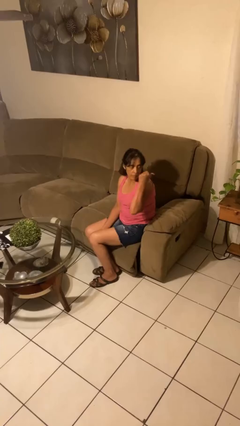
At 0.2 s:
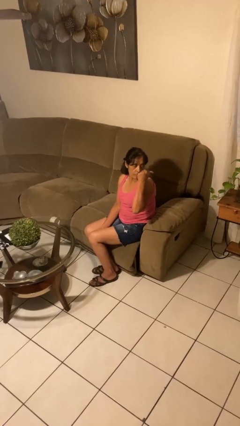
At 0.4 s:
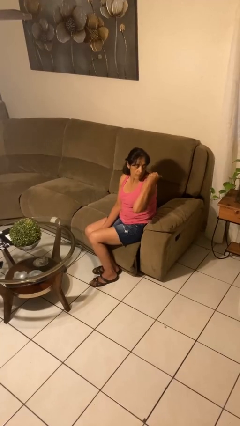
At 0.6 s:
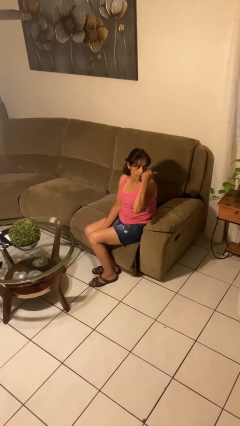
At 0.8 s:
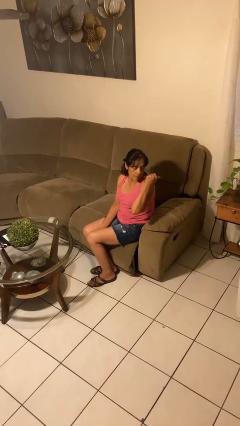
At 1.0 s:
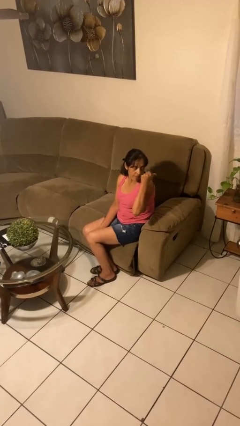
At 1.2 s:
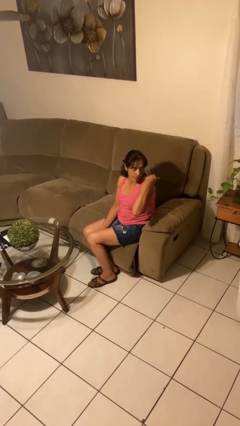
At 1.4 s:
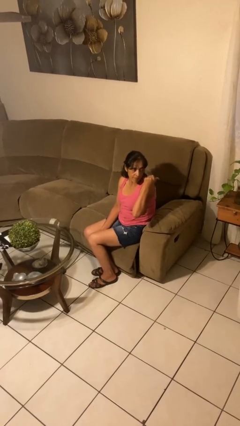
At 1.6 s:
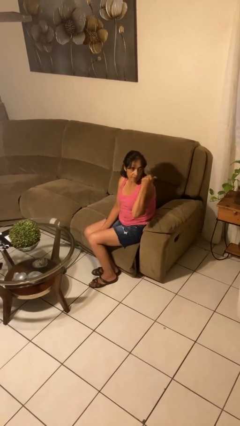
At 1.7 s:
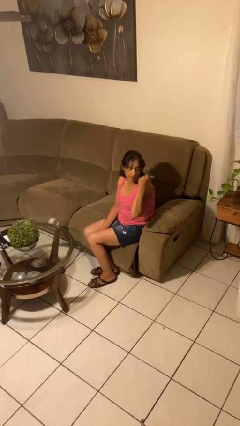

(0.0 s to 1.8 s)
person gestures behind me

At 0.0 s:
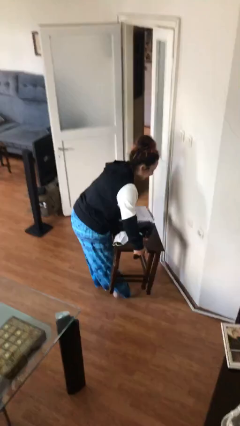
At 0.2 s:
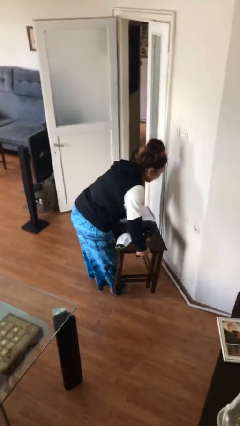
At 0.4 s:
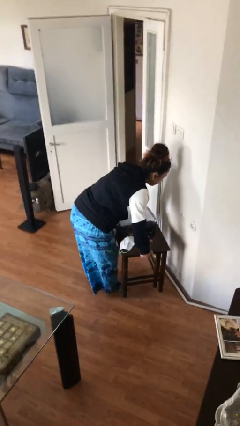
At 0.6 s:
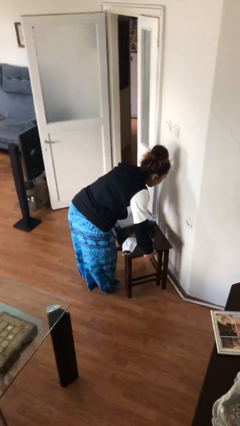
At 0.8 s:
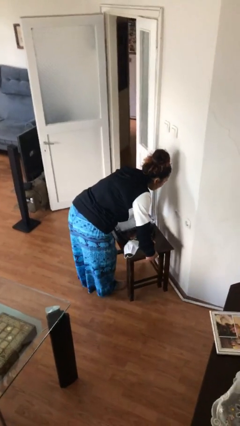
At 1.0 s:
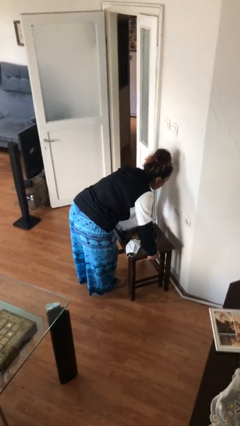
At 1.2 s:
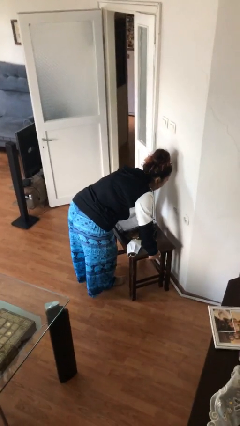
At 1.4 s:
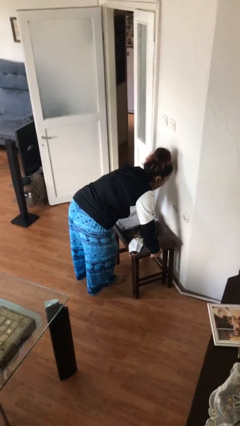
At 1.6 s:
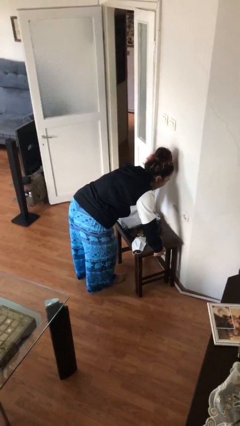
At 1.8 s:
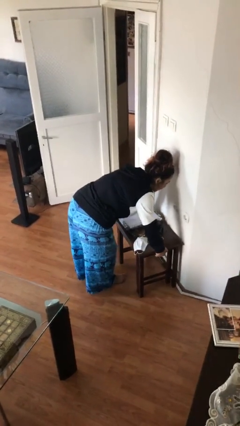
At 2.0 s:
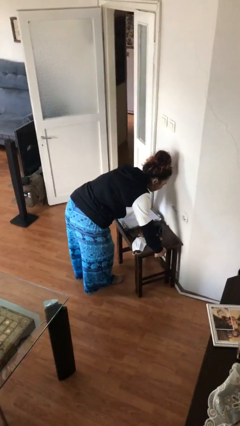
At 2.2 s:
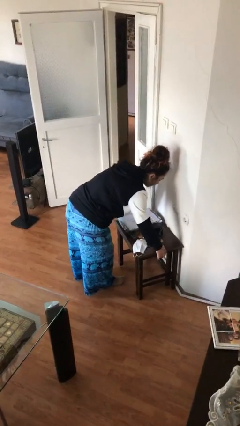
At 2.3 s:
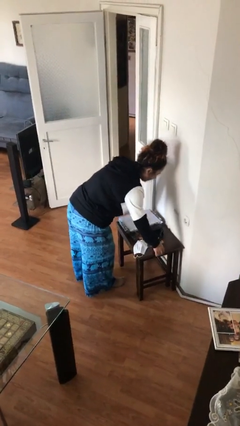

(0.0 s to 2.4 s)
person puts down object on floor

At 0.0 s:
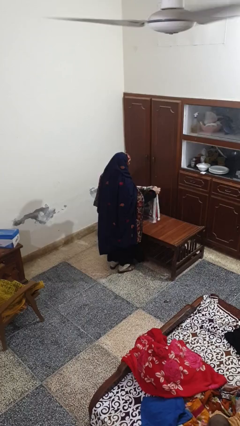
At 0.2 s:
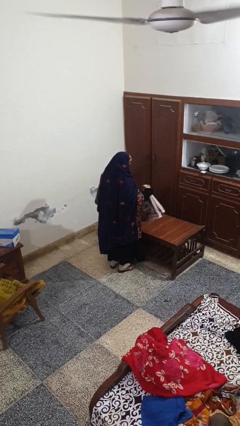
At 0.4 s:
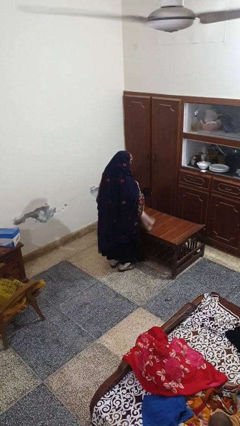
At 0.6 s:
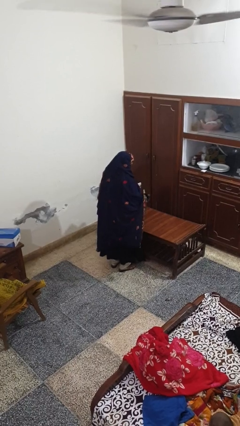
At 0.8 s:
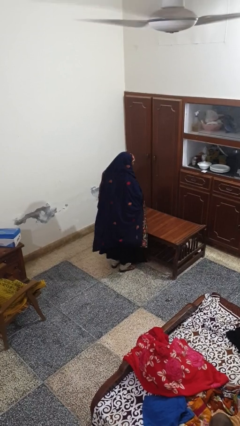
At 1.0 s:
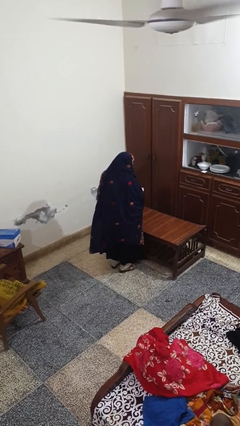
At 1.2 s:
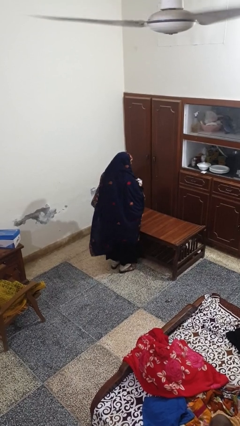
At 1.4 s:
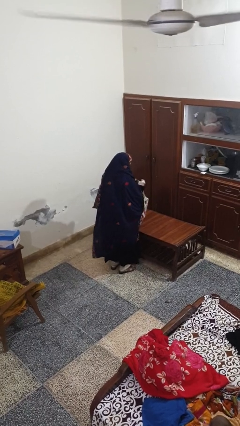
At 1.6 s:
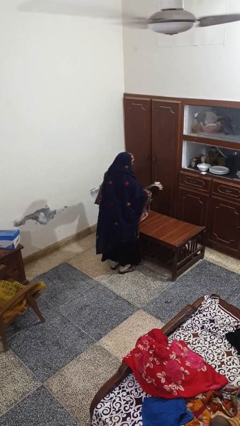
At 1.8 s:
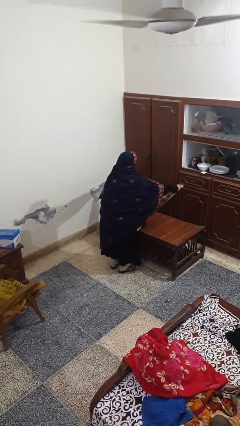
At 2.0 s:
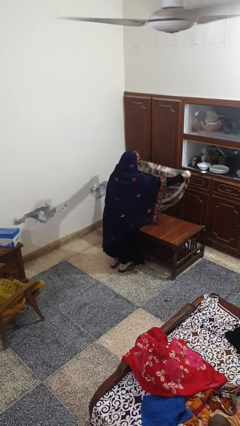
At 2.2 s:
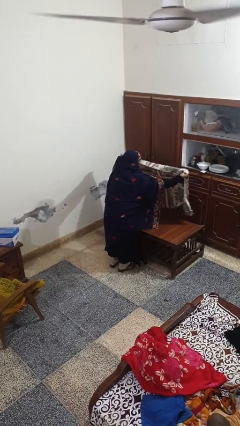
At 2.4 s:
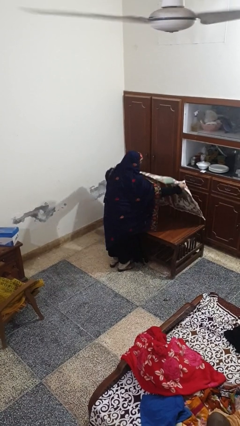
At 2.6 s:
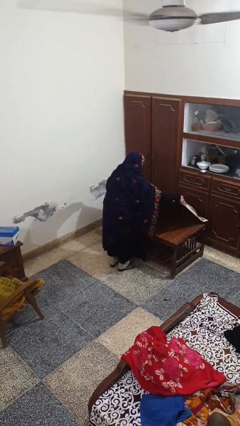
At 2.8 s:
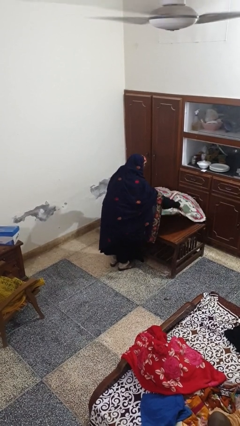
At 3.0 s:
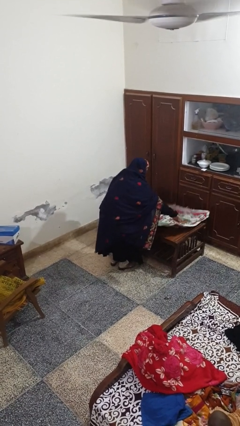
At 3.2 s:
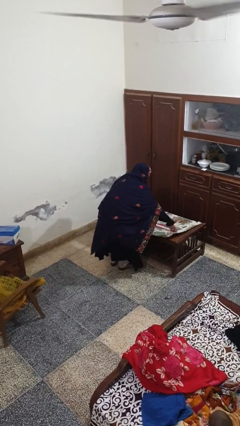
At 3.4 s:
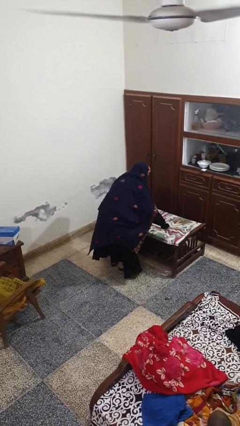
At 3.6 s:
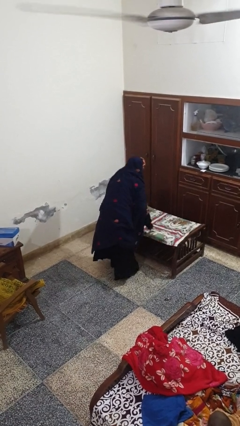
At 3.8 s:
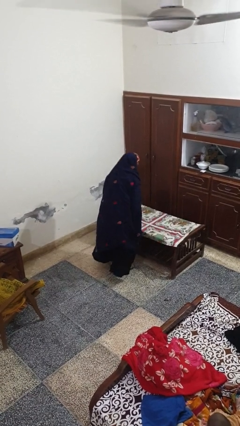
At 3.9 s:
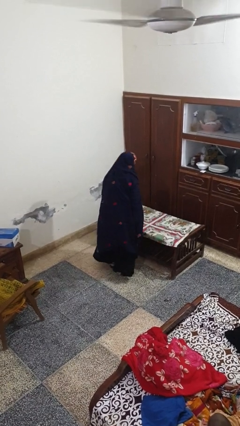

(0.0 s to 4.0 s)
person spreads tablecloth

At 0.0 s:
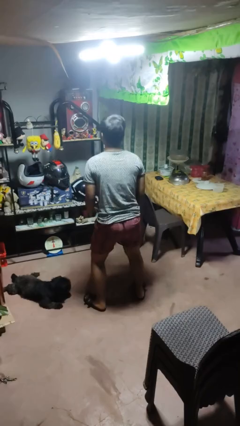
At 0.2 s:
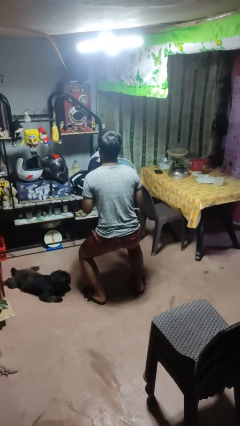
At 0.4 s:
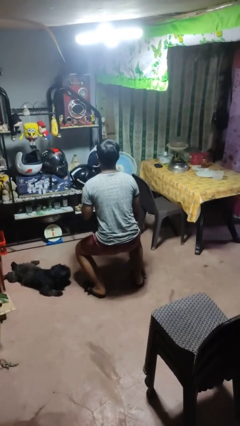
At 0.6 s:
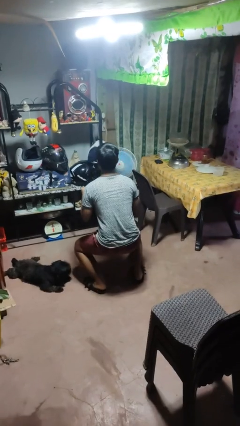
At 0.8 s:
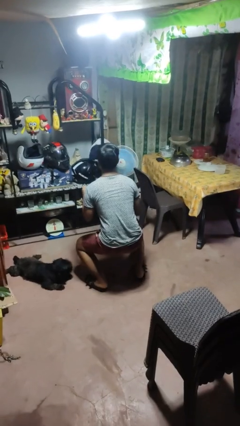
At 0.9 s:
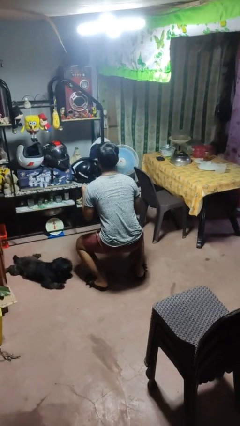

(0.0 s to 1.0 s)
person squats

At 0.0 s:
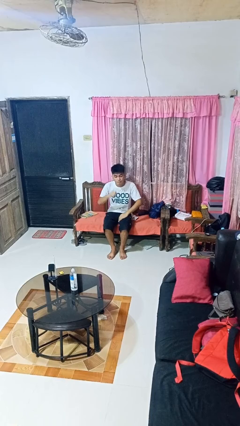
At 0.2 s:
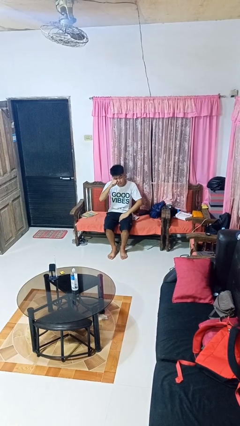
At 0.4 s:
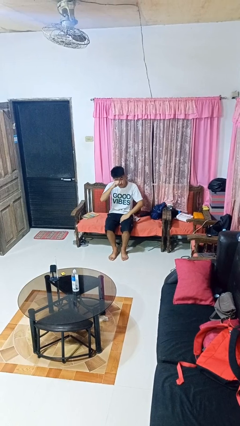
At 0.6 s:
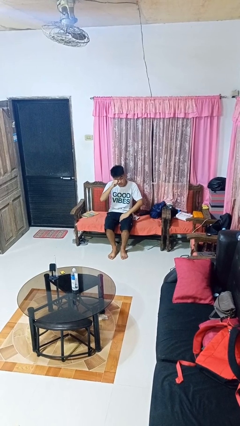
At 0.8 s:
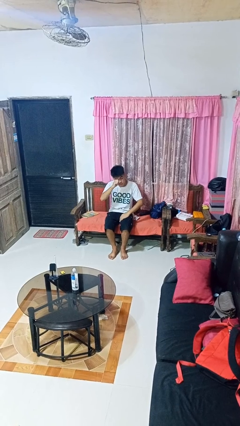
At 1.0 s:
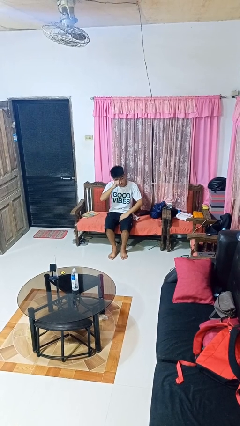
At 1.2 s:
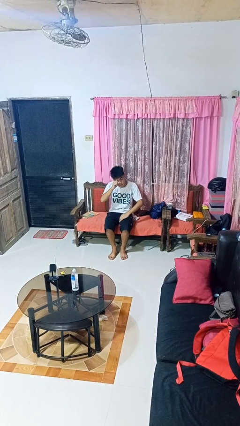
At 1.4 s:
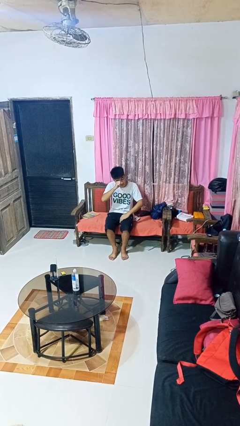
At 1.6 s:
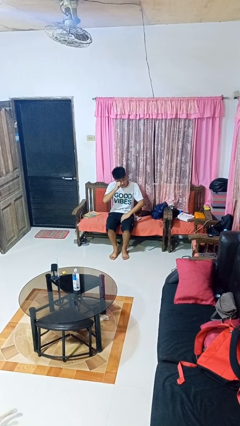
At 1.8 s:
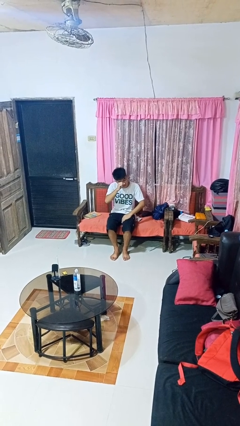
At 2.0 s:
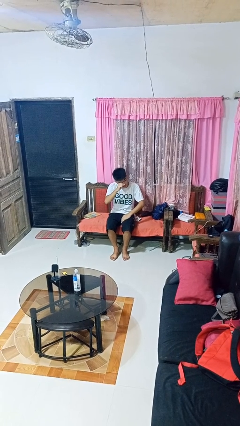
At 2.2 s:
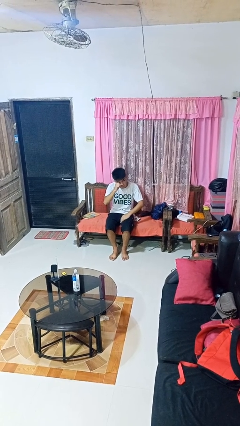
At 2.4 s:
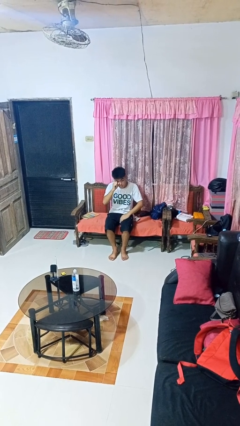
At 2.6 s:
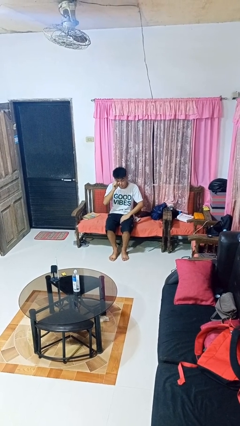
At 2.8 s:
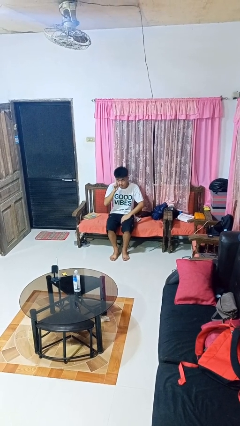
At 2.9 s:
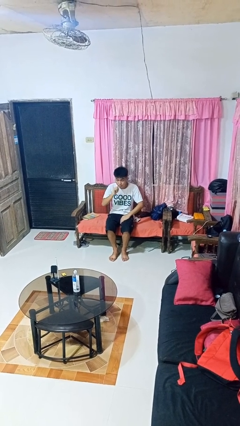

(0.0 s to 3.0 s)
person rubs eyes

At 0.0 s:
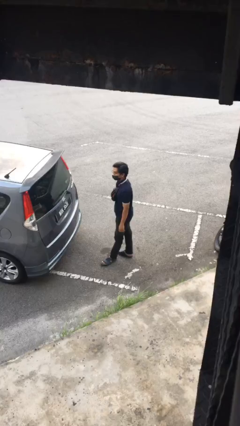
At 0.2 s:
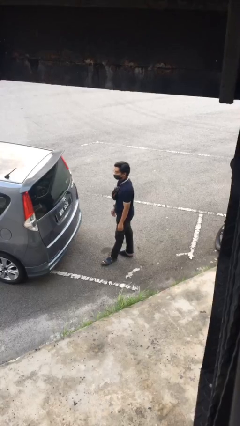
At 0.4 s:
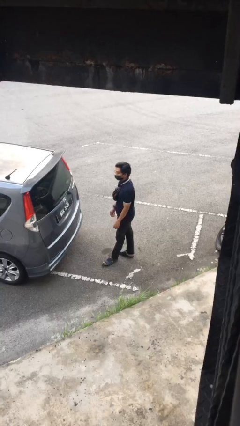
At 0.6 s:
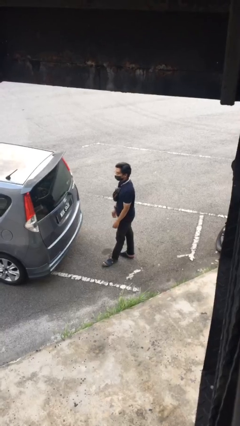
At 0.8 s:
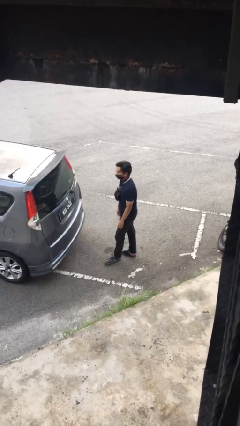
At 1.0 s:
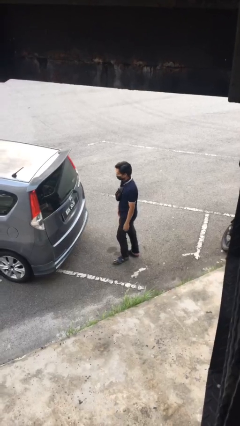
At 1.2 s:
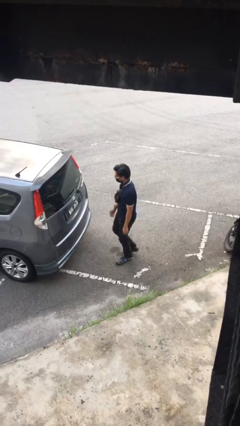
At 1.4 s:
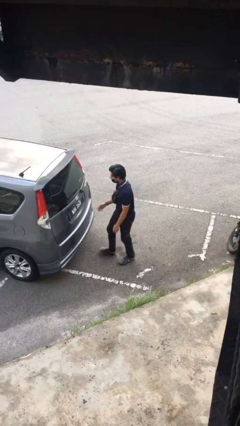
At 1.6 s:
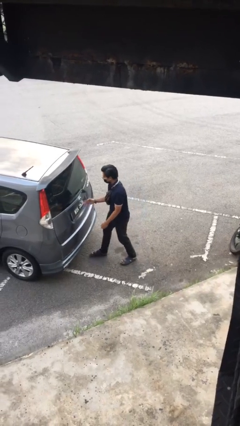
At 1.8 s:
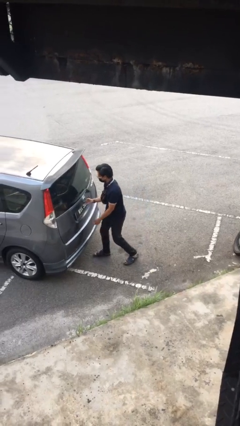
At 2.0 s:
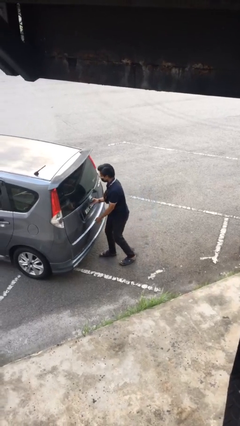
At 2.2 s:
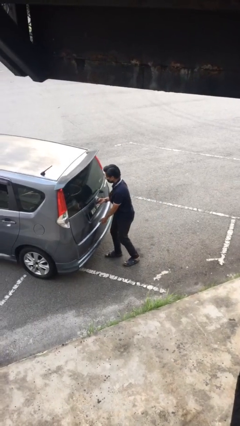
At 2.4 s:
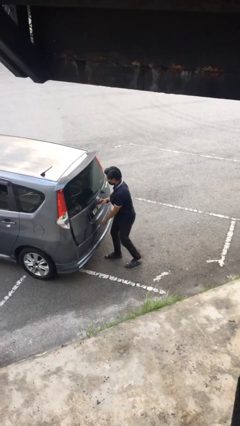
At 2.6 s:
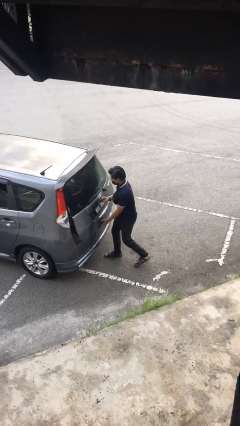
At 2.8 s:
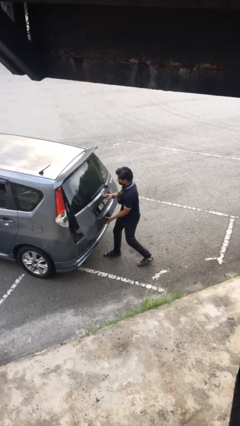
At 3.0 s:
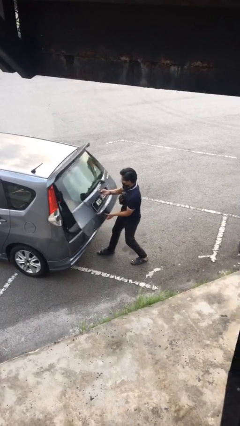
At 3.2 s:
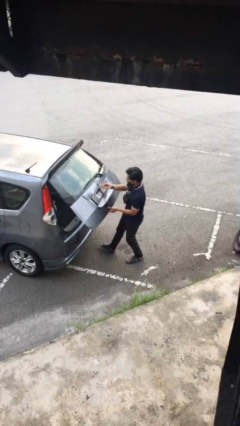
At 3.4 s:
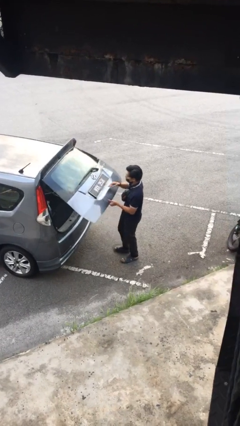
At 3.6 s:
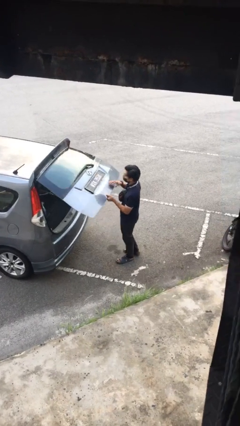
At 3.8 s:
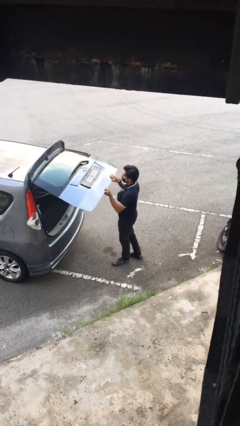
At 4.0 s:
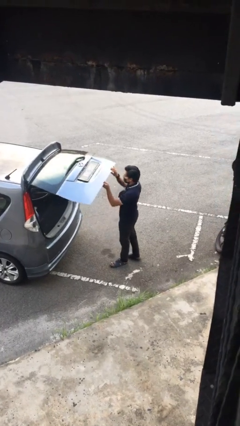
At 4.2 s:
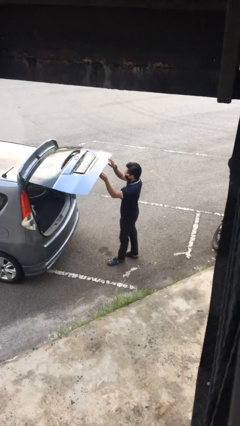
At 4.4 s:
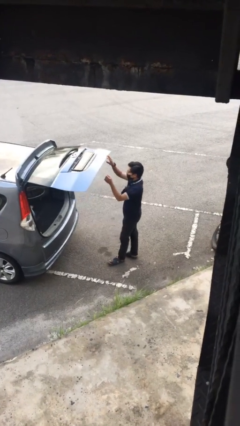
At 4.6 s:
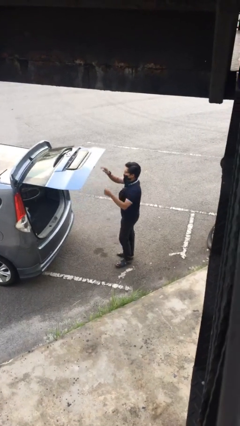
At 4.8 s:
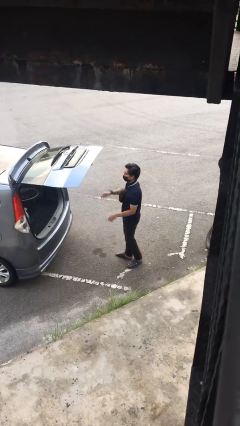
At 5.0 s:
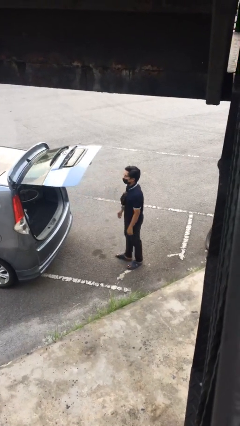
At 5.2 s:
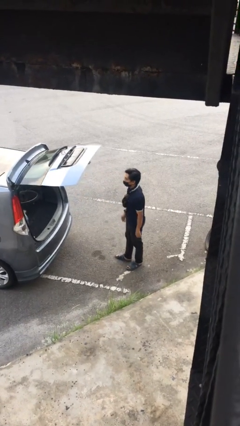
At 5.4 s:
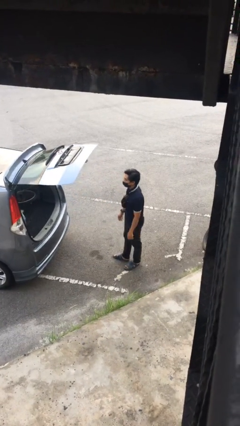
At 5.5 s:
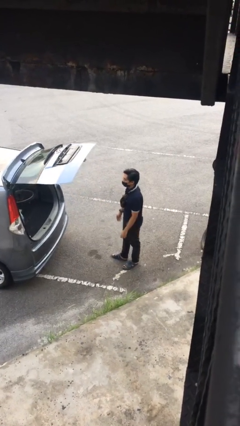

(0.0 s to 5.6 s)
person opens car trunk
